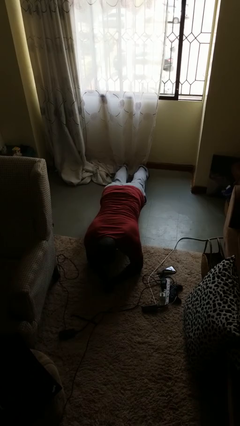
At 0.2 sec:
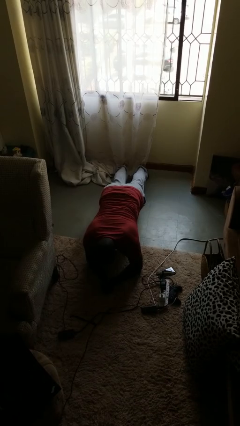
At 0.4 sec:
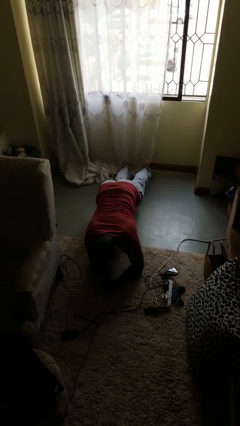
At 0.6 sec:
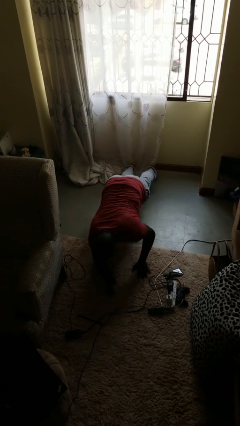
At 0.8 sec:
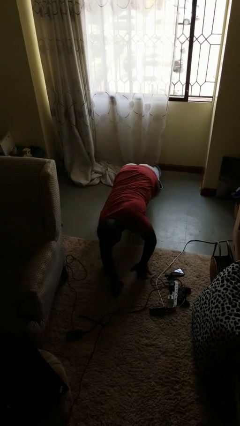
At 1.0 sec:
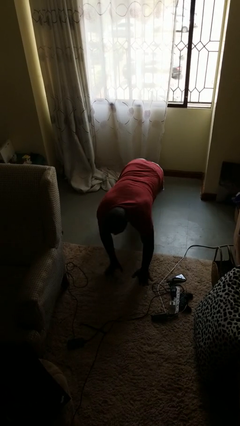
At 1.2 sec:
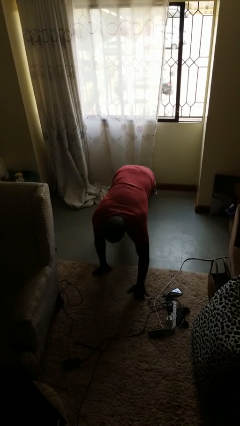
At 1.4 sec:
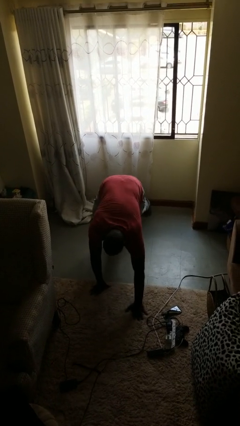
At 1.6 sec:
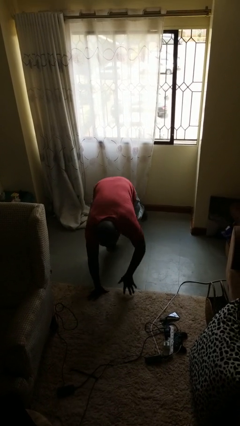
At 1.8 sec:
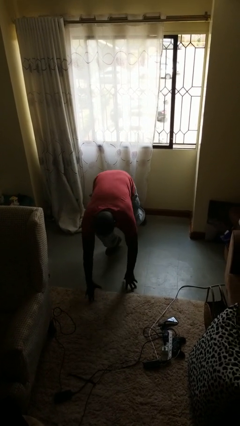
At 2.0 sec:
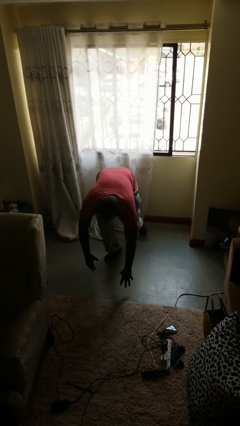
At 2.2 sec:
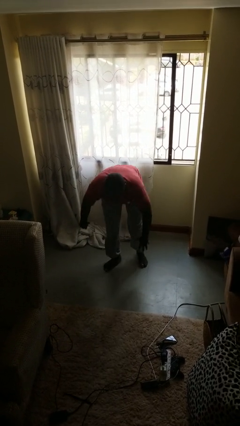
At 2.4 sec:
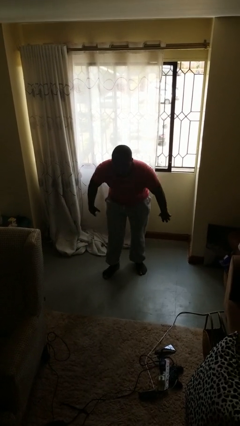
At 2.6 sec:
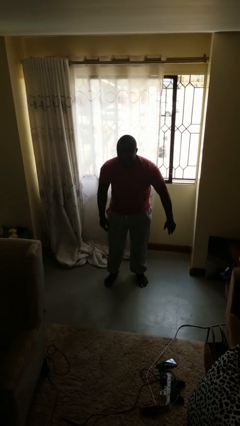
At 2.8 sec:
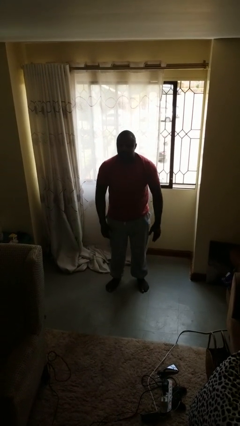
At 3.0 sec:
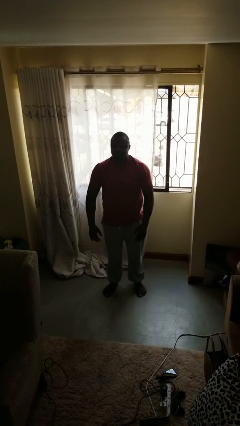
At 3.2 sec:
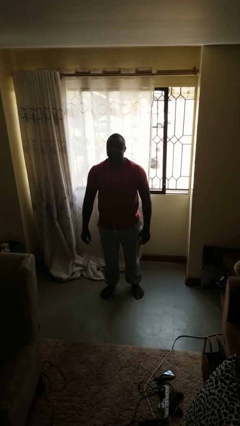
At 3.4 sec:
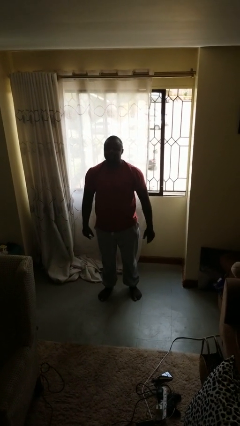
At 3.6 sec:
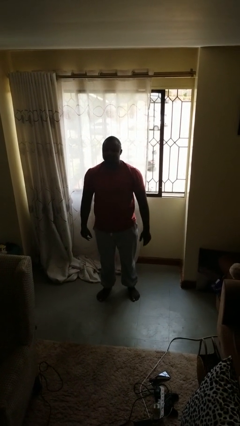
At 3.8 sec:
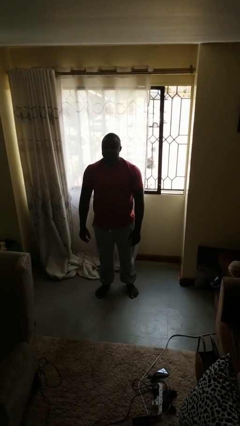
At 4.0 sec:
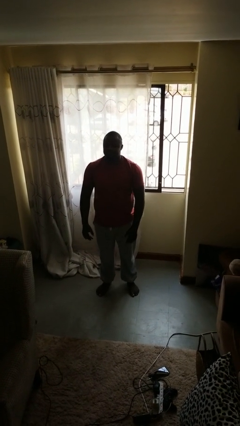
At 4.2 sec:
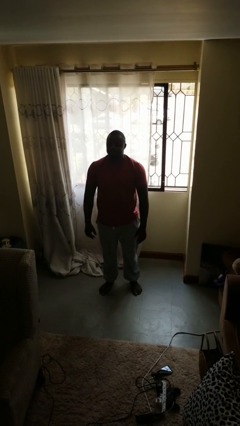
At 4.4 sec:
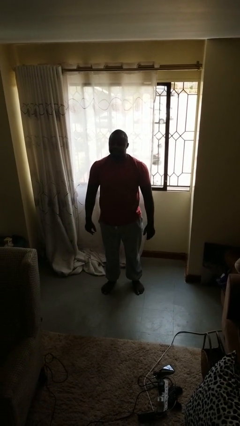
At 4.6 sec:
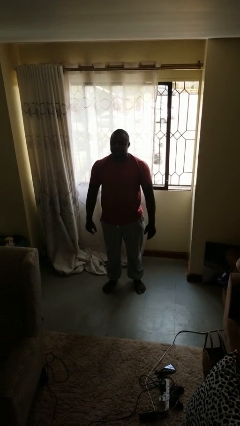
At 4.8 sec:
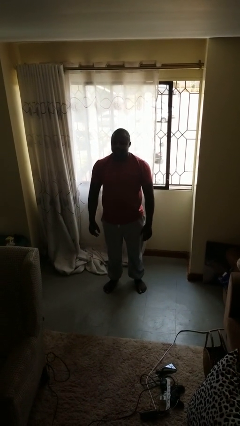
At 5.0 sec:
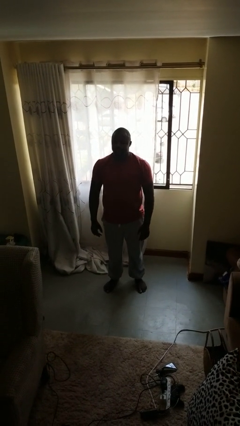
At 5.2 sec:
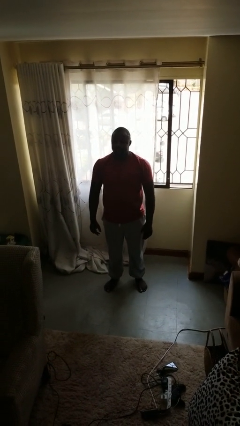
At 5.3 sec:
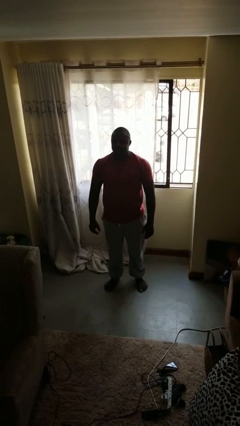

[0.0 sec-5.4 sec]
person stands up from floor

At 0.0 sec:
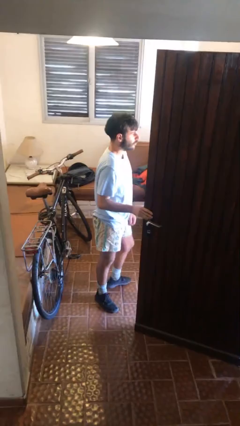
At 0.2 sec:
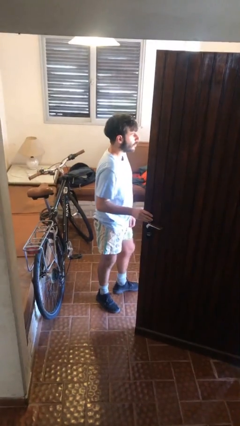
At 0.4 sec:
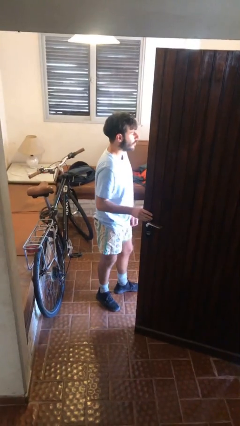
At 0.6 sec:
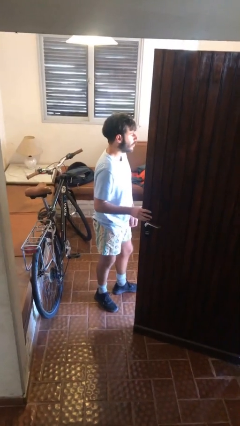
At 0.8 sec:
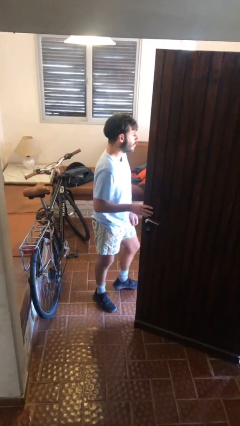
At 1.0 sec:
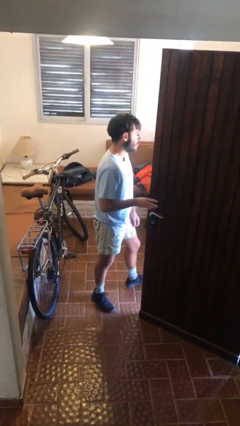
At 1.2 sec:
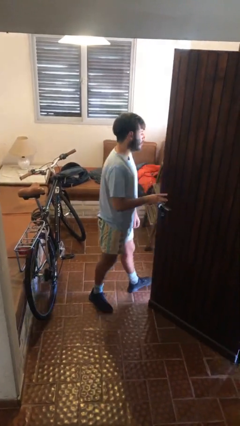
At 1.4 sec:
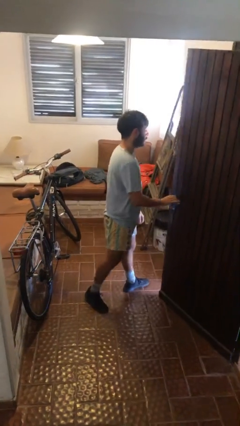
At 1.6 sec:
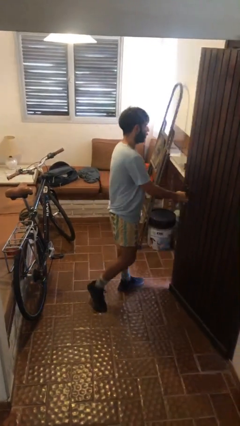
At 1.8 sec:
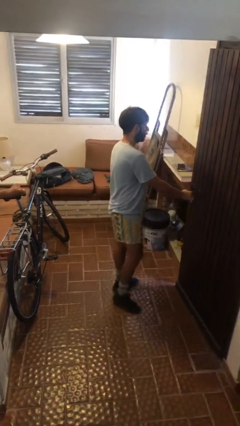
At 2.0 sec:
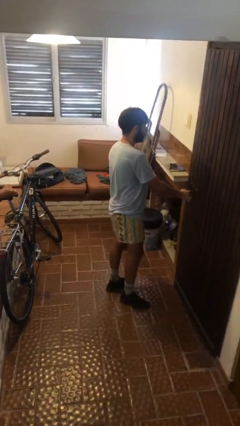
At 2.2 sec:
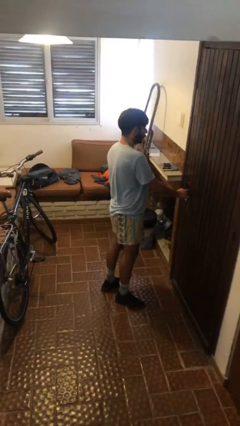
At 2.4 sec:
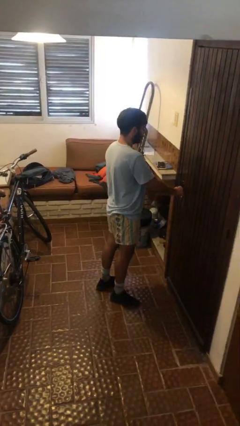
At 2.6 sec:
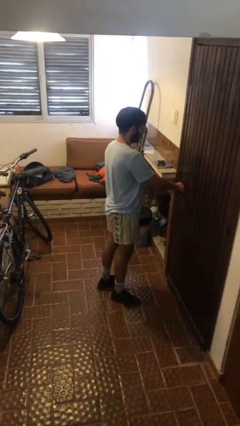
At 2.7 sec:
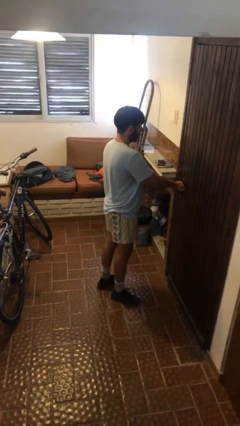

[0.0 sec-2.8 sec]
person closes facility door

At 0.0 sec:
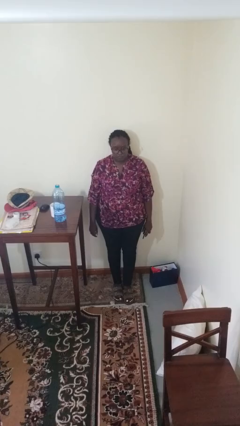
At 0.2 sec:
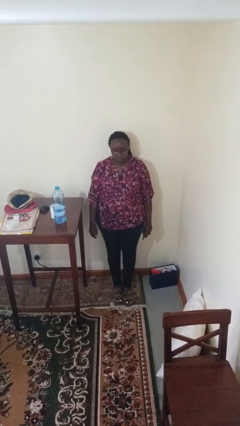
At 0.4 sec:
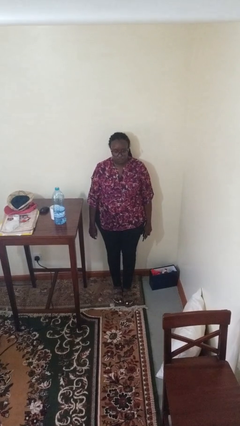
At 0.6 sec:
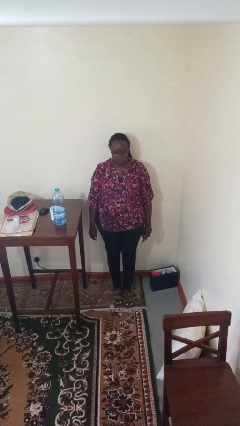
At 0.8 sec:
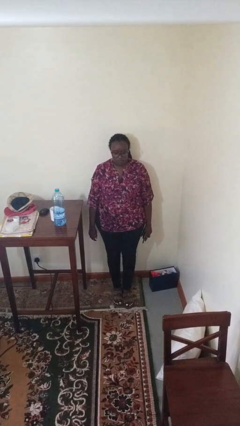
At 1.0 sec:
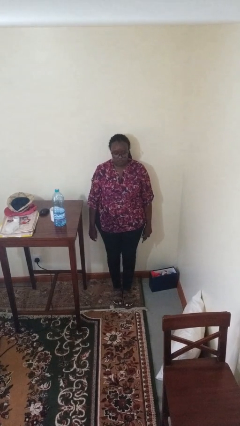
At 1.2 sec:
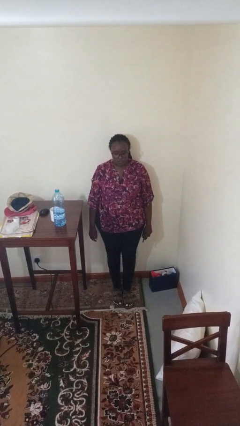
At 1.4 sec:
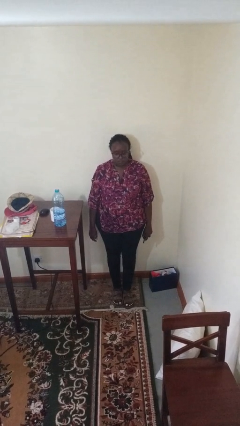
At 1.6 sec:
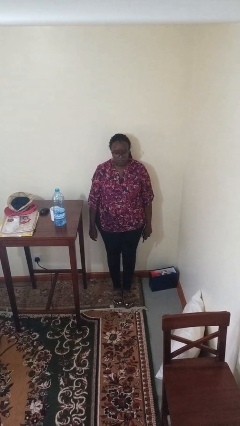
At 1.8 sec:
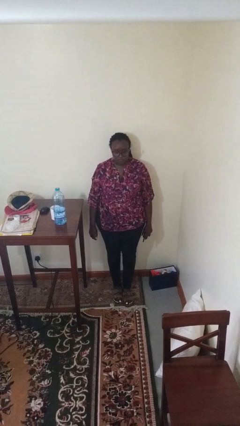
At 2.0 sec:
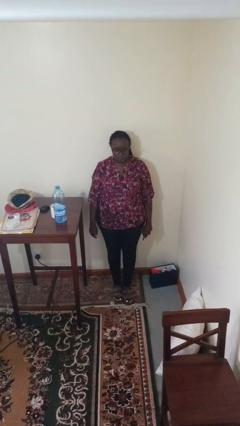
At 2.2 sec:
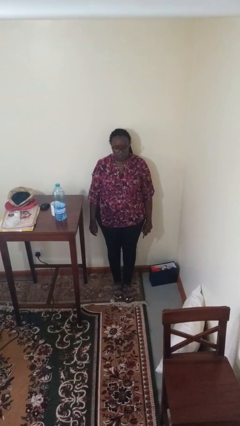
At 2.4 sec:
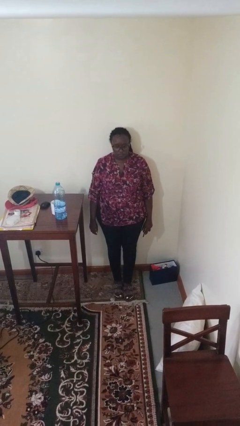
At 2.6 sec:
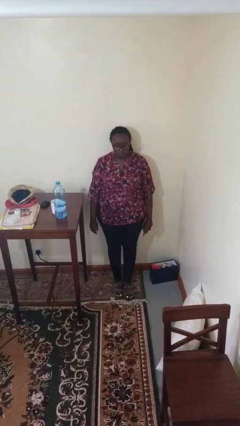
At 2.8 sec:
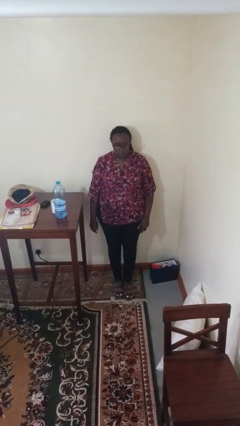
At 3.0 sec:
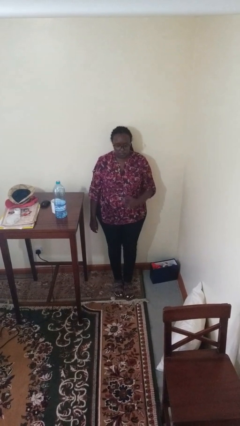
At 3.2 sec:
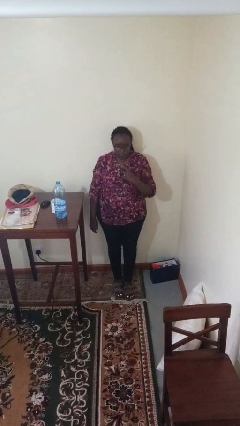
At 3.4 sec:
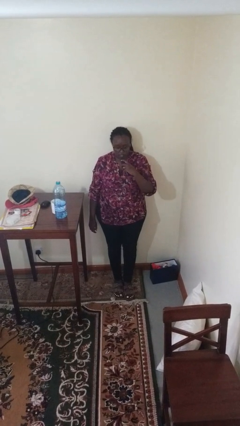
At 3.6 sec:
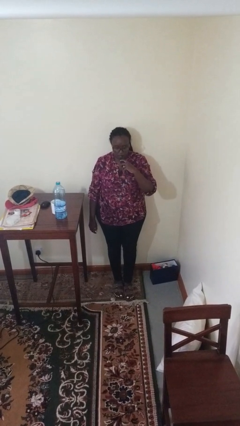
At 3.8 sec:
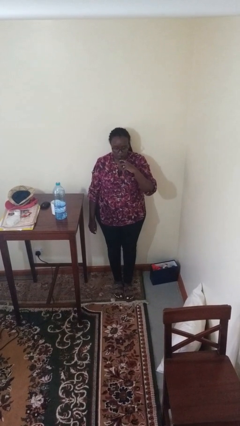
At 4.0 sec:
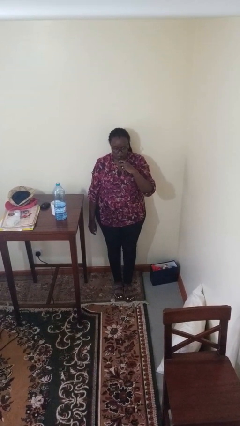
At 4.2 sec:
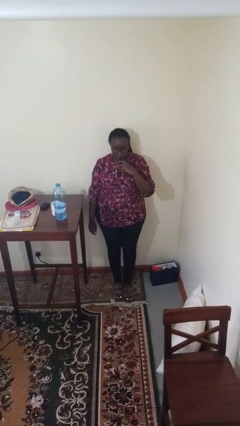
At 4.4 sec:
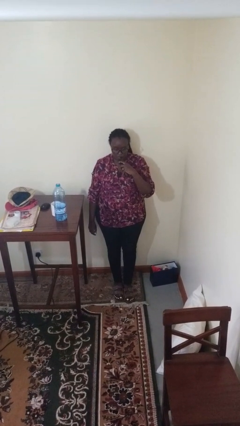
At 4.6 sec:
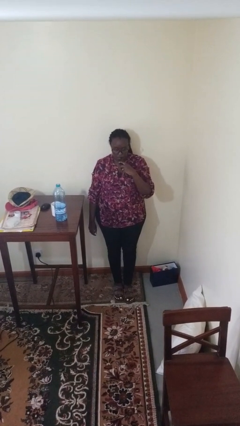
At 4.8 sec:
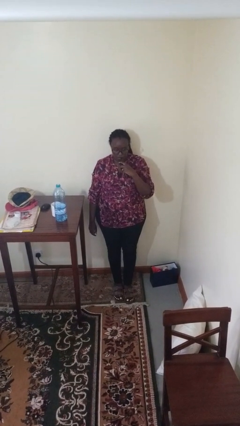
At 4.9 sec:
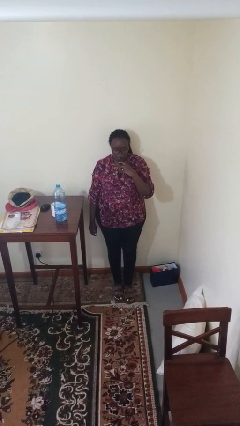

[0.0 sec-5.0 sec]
person vapes

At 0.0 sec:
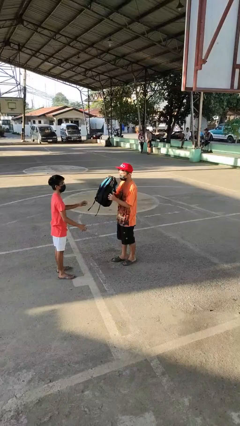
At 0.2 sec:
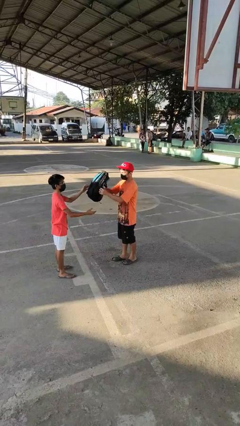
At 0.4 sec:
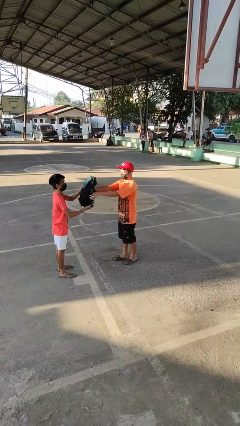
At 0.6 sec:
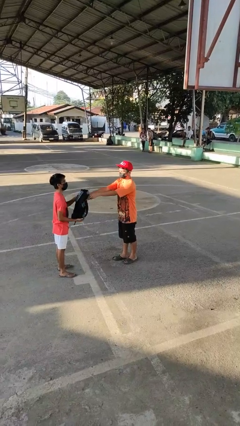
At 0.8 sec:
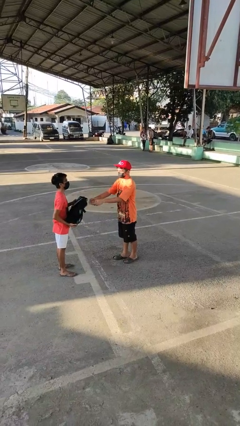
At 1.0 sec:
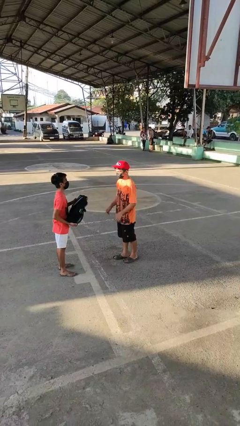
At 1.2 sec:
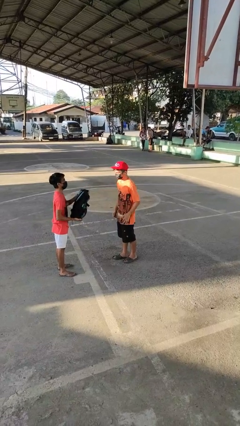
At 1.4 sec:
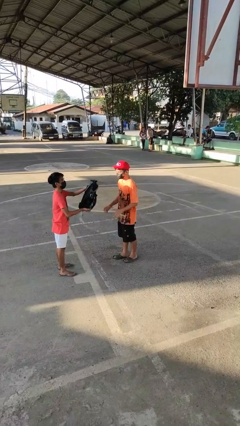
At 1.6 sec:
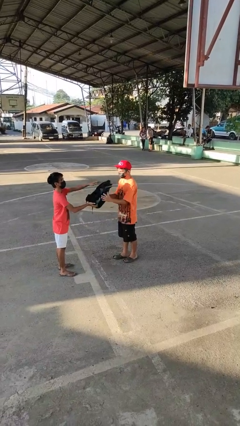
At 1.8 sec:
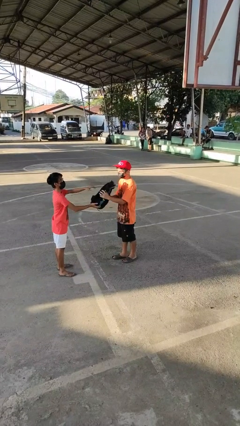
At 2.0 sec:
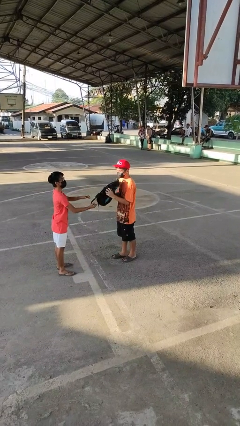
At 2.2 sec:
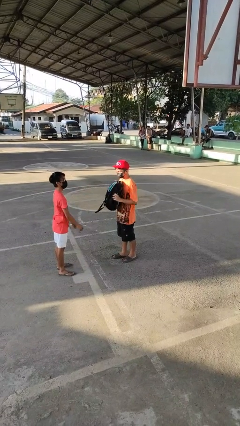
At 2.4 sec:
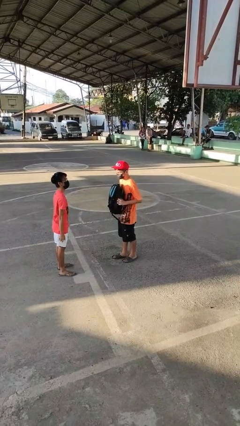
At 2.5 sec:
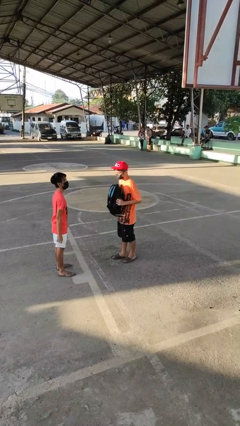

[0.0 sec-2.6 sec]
person transfers object to person

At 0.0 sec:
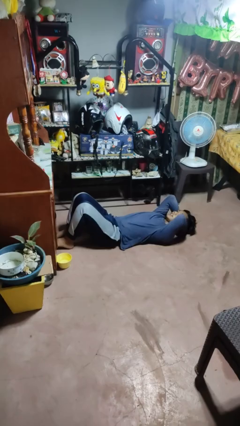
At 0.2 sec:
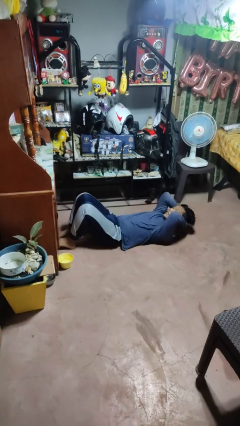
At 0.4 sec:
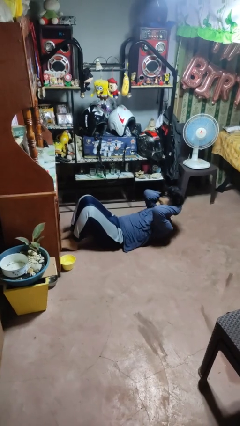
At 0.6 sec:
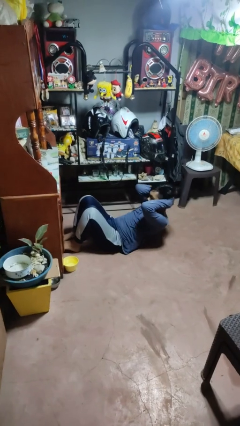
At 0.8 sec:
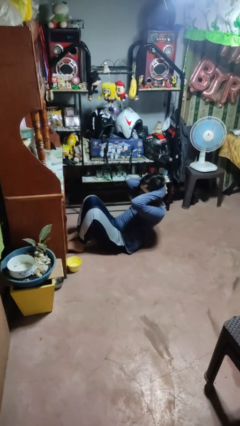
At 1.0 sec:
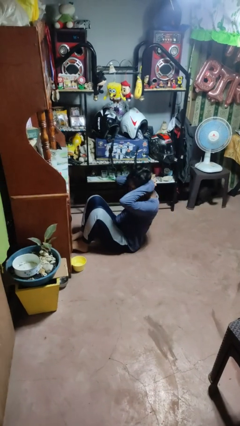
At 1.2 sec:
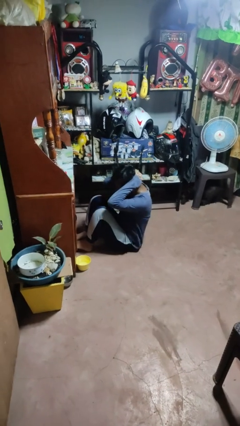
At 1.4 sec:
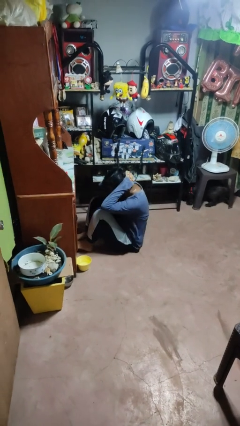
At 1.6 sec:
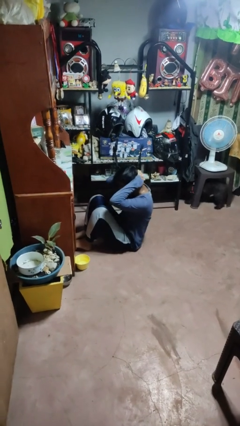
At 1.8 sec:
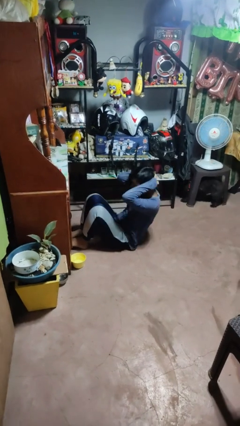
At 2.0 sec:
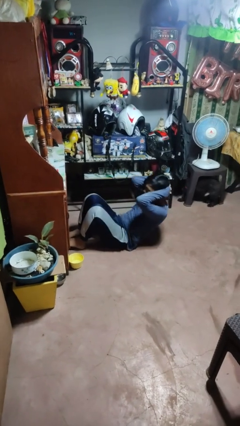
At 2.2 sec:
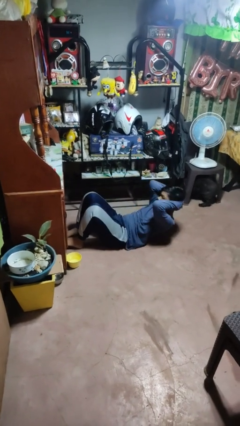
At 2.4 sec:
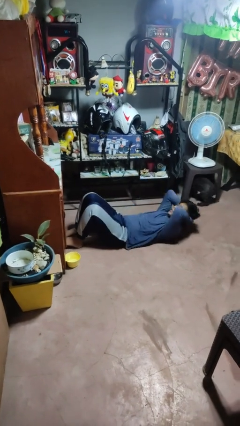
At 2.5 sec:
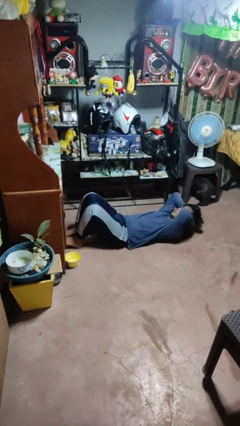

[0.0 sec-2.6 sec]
person exercises with situp
